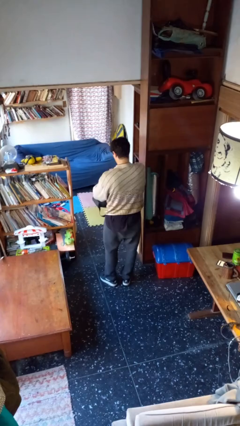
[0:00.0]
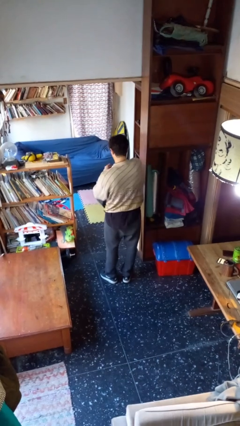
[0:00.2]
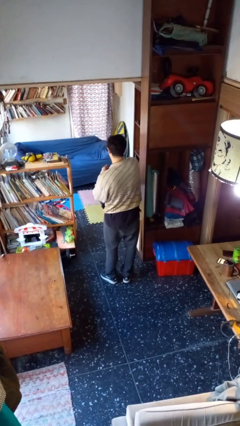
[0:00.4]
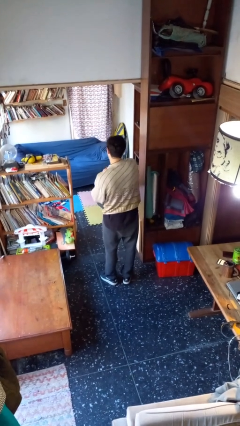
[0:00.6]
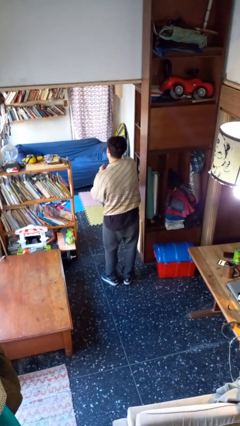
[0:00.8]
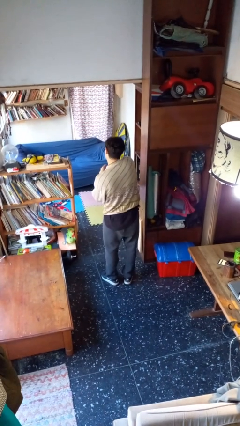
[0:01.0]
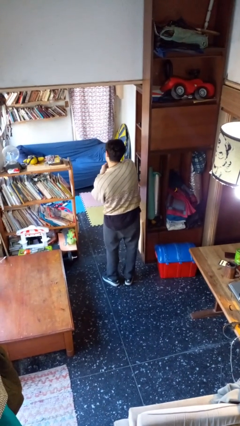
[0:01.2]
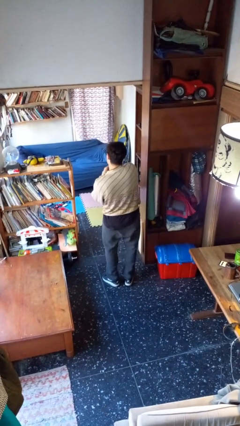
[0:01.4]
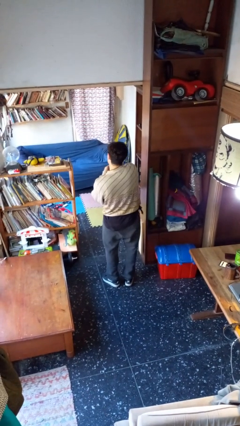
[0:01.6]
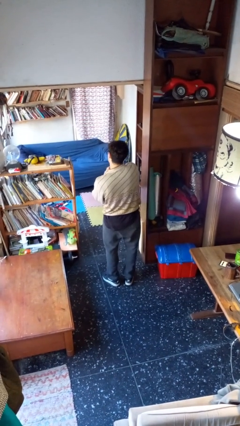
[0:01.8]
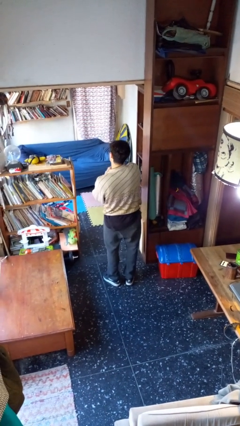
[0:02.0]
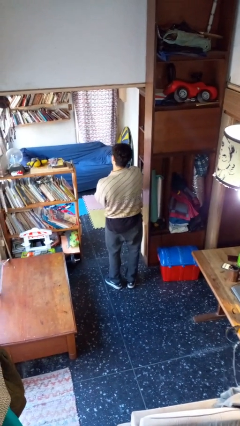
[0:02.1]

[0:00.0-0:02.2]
person searches in backpack

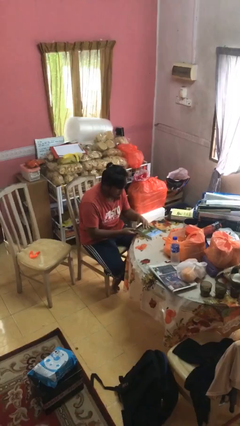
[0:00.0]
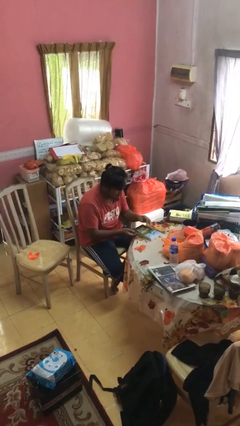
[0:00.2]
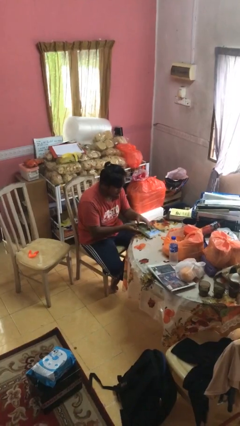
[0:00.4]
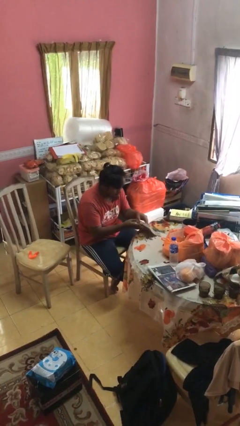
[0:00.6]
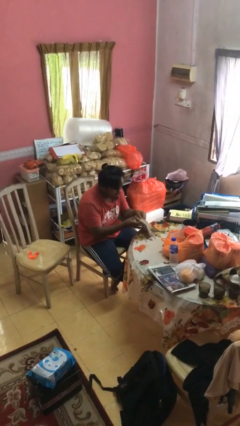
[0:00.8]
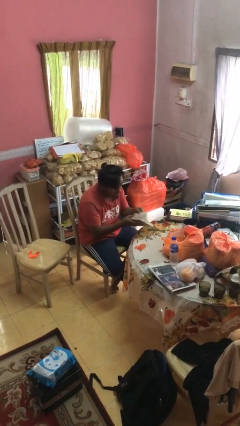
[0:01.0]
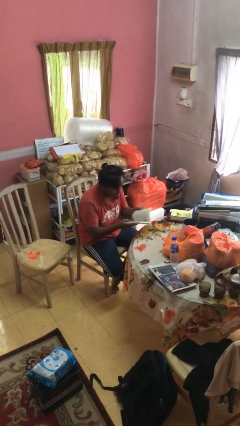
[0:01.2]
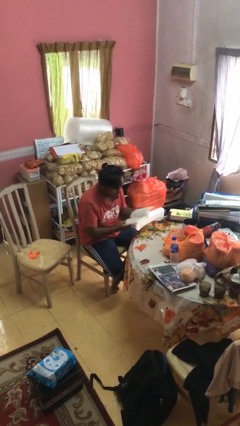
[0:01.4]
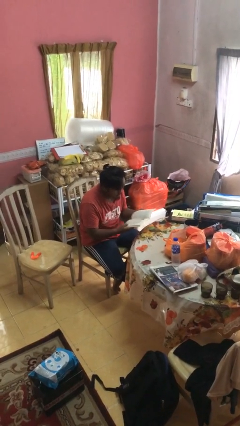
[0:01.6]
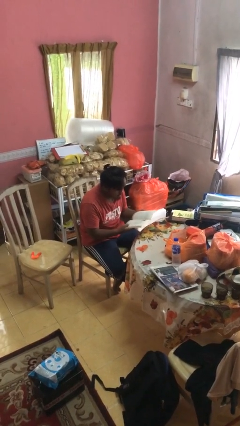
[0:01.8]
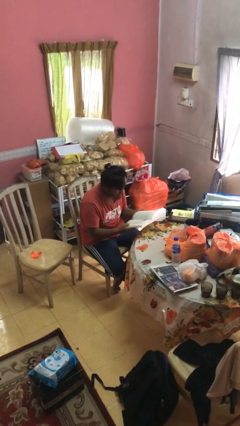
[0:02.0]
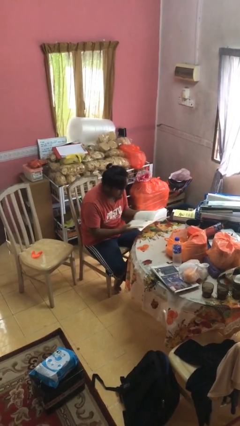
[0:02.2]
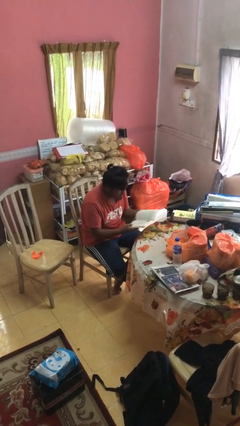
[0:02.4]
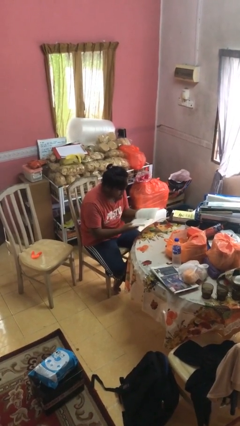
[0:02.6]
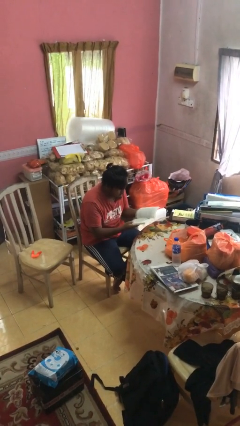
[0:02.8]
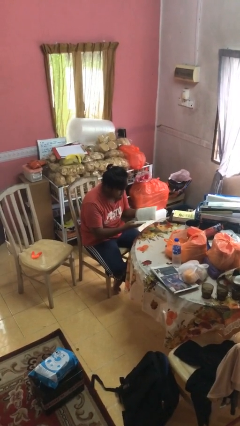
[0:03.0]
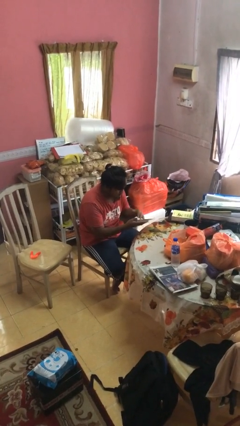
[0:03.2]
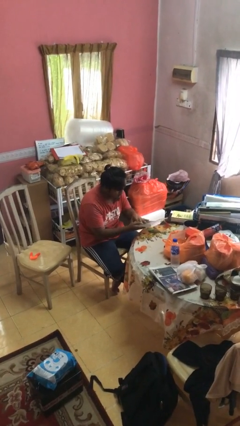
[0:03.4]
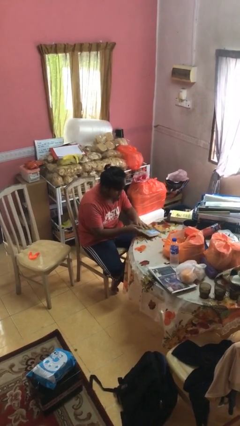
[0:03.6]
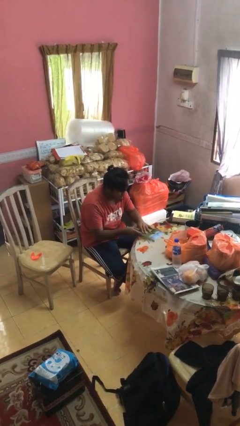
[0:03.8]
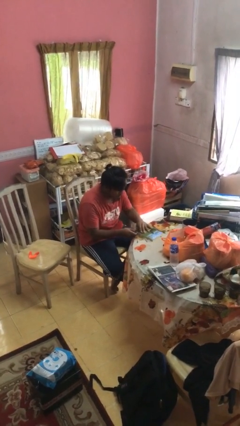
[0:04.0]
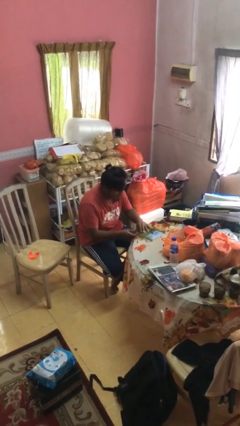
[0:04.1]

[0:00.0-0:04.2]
person reads book

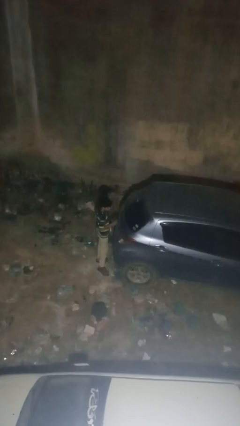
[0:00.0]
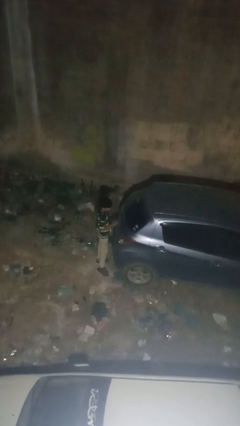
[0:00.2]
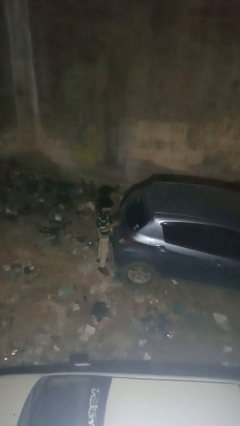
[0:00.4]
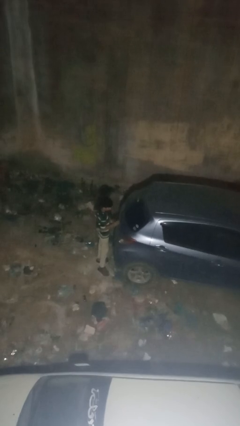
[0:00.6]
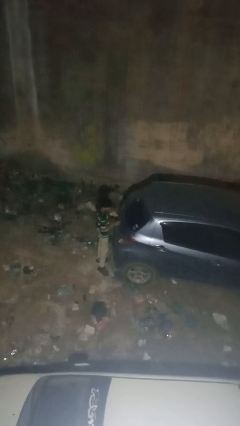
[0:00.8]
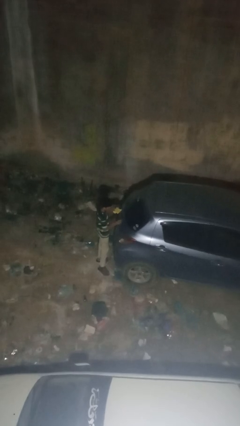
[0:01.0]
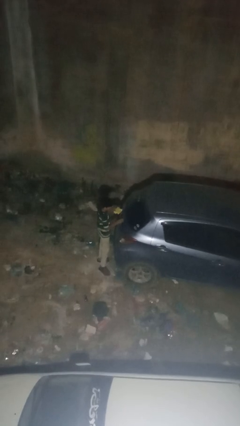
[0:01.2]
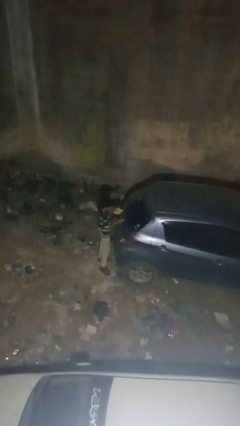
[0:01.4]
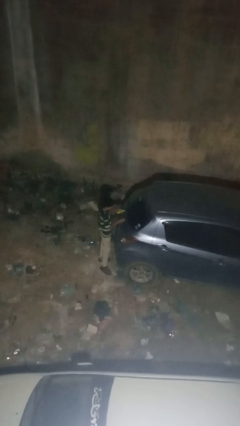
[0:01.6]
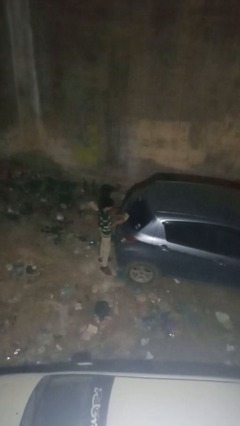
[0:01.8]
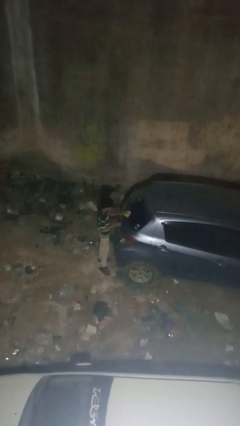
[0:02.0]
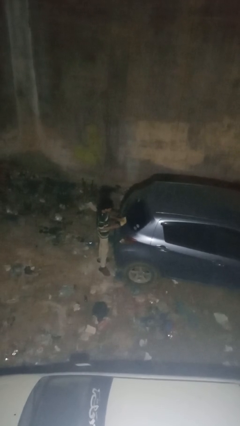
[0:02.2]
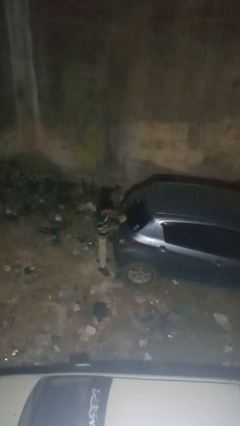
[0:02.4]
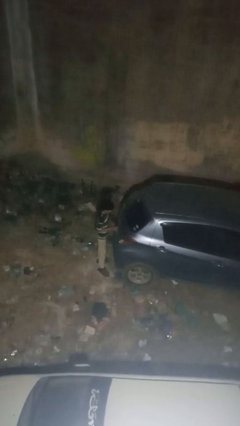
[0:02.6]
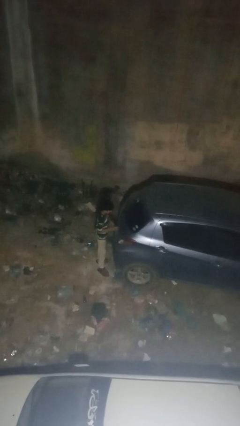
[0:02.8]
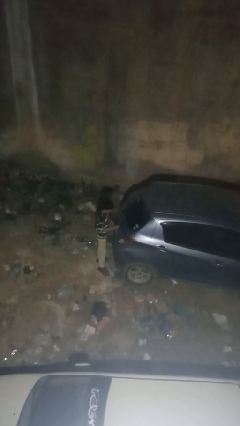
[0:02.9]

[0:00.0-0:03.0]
person polishes car with rag

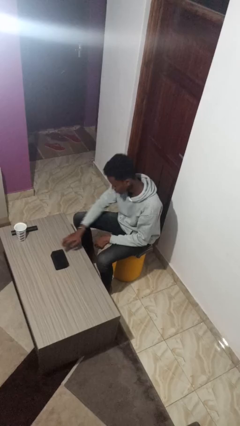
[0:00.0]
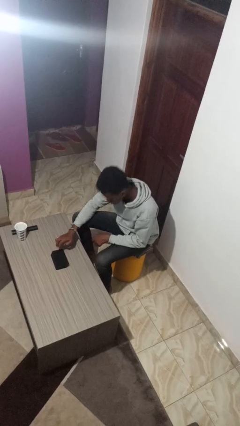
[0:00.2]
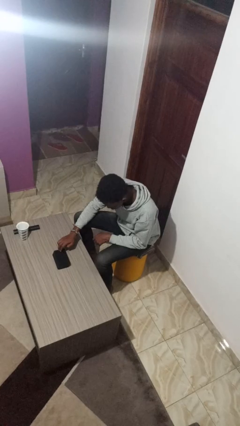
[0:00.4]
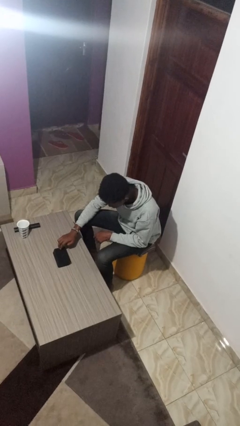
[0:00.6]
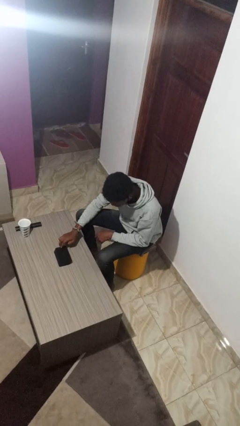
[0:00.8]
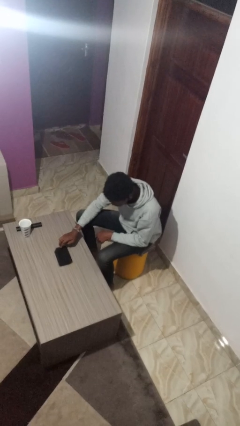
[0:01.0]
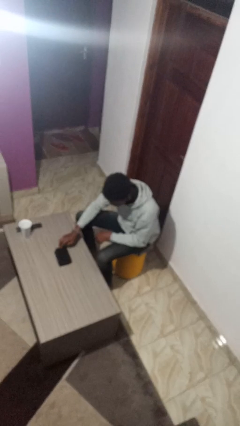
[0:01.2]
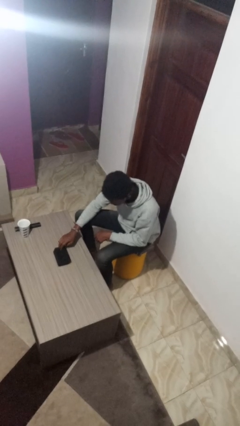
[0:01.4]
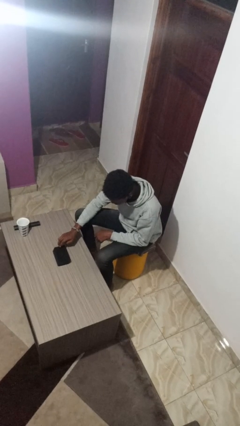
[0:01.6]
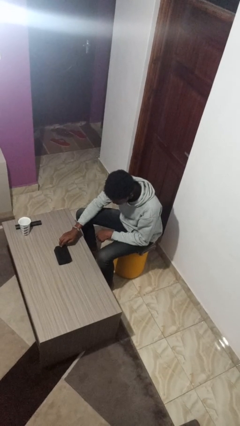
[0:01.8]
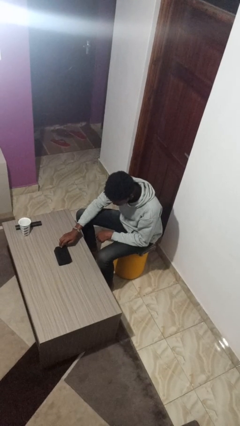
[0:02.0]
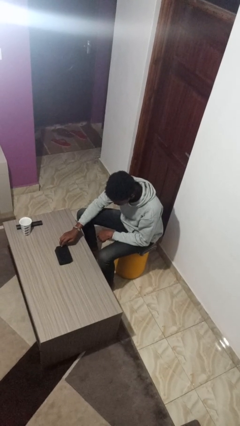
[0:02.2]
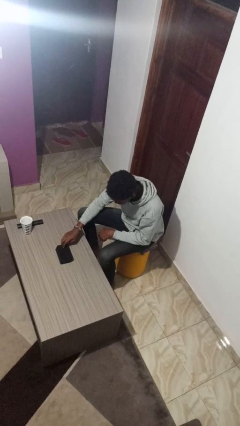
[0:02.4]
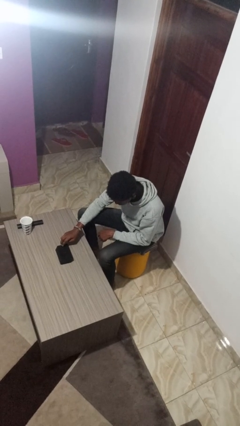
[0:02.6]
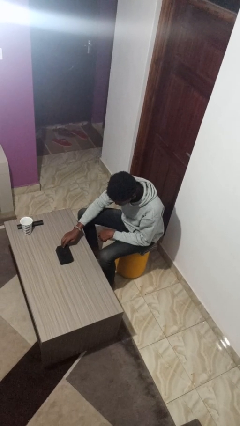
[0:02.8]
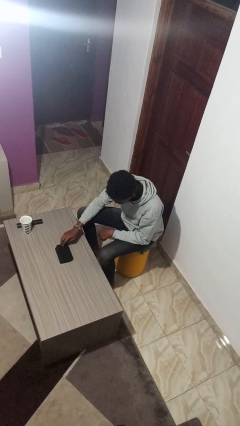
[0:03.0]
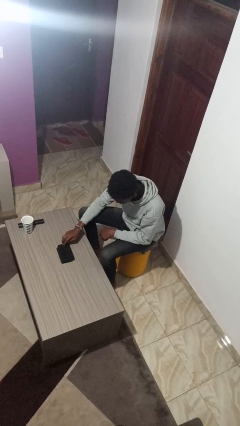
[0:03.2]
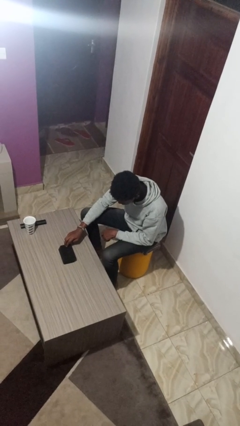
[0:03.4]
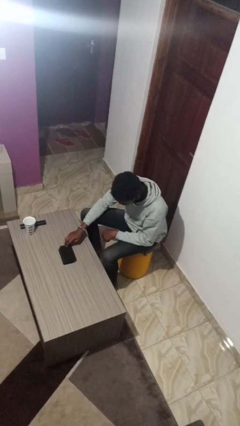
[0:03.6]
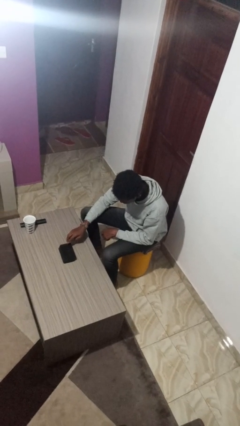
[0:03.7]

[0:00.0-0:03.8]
person taps object with finger

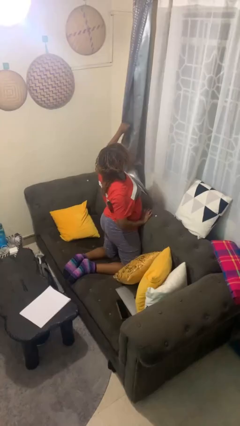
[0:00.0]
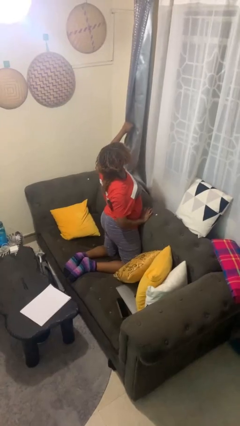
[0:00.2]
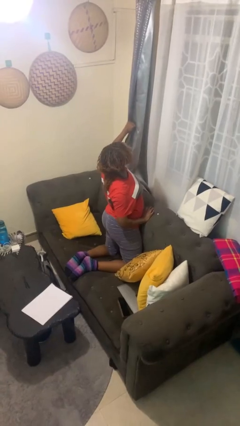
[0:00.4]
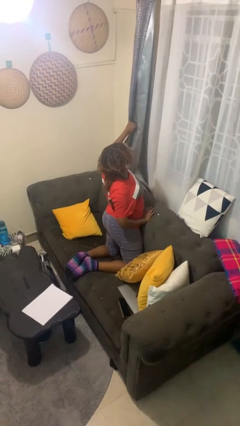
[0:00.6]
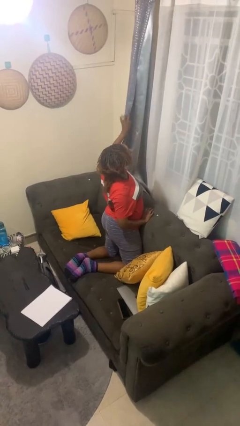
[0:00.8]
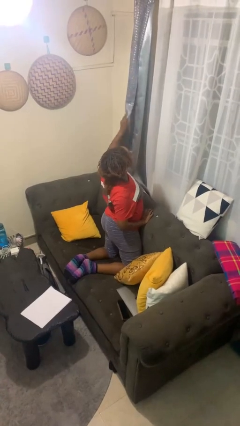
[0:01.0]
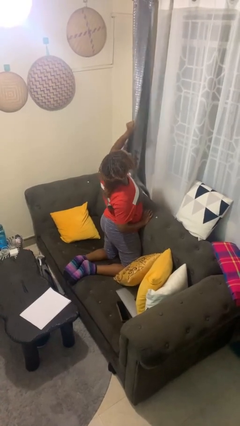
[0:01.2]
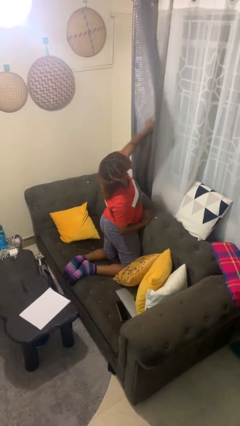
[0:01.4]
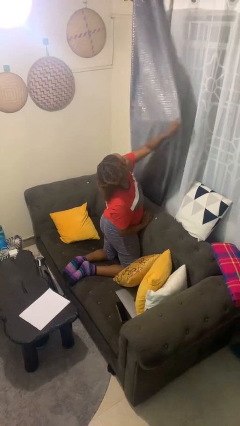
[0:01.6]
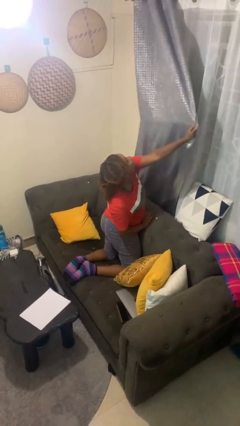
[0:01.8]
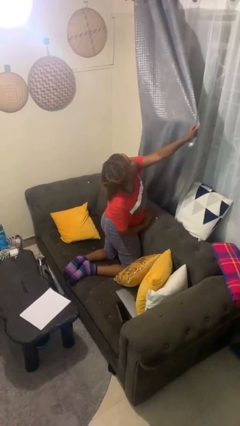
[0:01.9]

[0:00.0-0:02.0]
person closes curtains

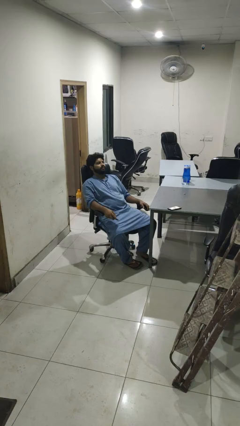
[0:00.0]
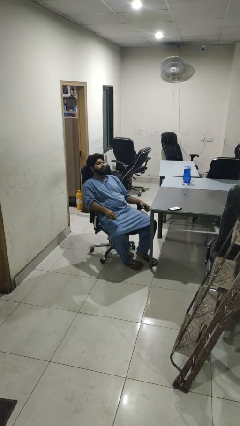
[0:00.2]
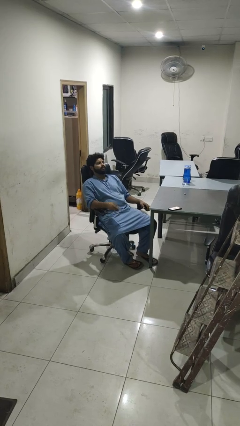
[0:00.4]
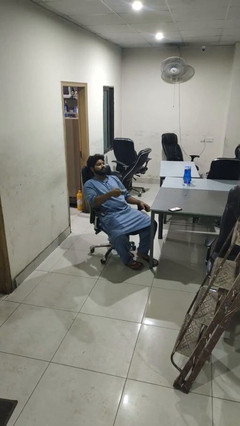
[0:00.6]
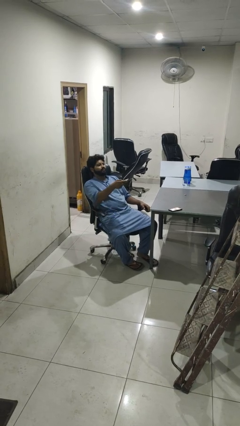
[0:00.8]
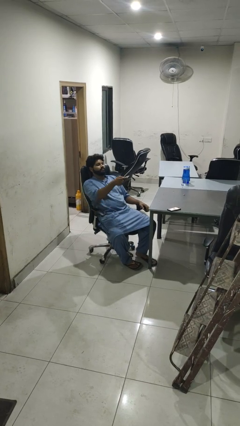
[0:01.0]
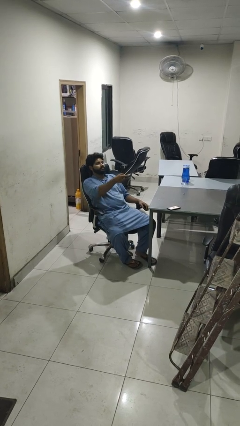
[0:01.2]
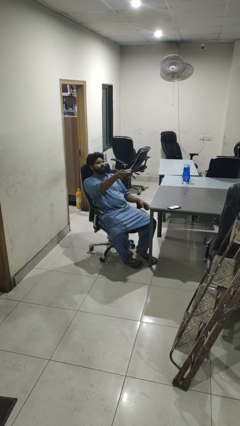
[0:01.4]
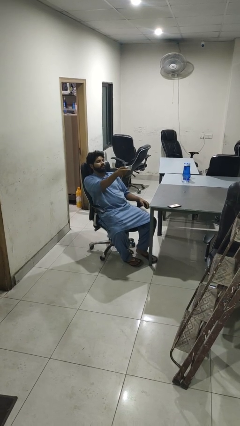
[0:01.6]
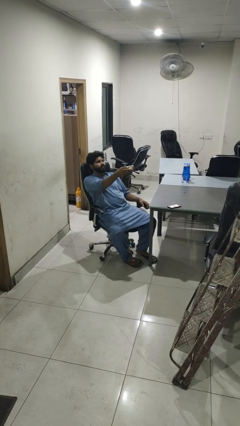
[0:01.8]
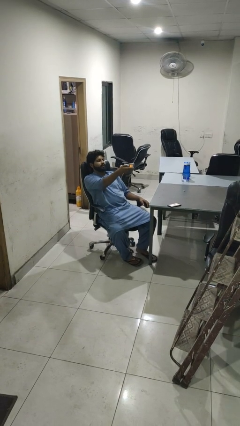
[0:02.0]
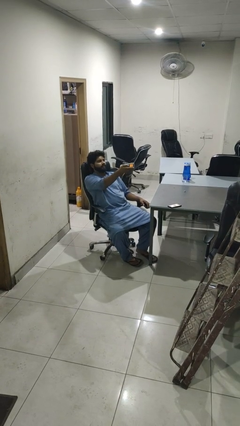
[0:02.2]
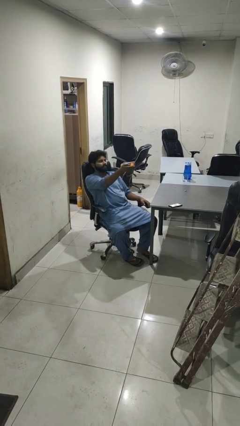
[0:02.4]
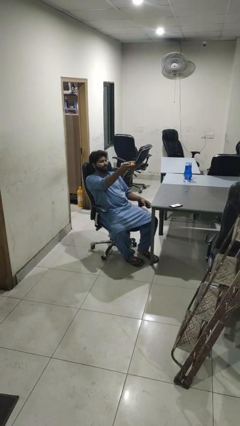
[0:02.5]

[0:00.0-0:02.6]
person uses television remote
